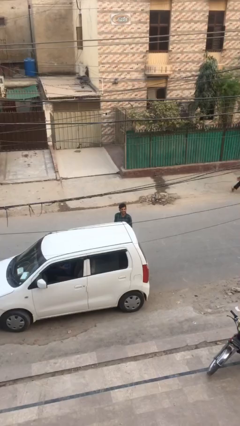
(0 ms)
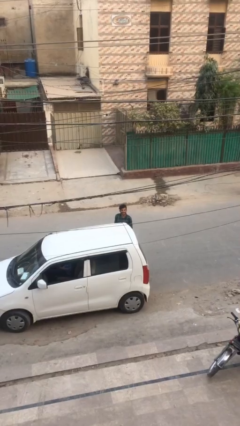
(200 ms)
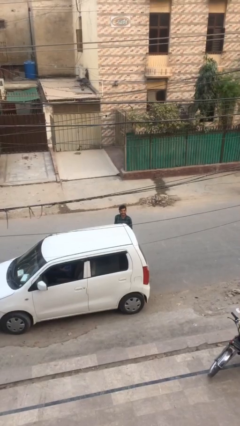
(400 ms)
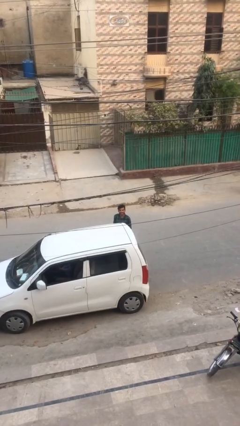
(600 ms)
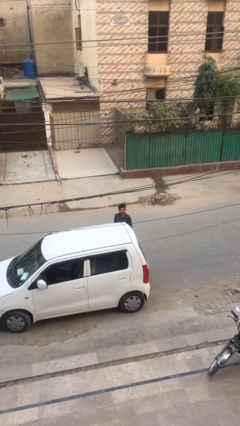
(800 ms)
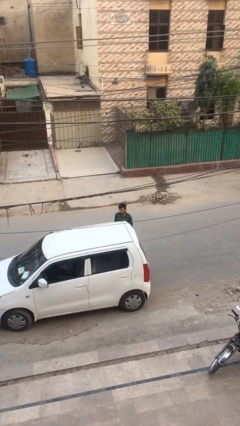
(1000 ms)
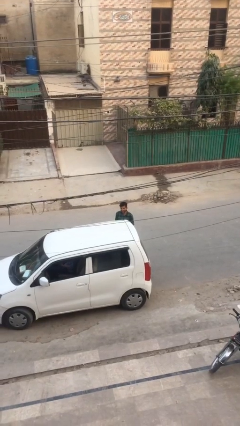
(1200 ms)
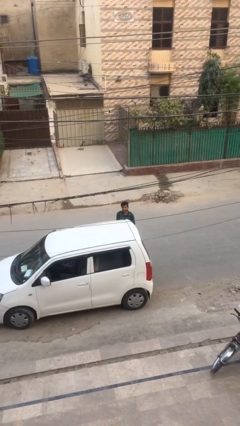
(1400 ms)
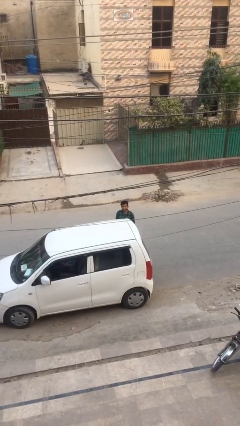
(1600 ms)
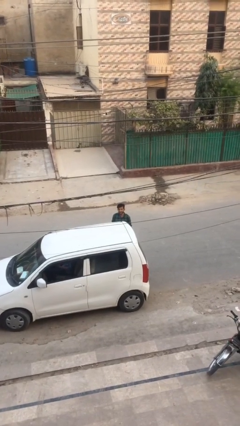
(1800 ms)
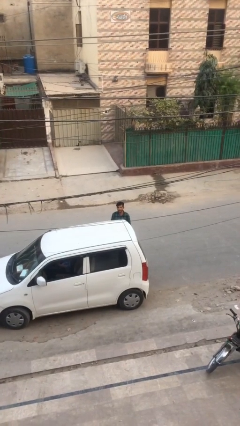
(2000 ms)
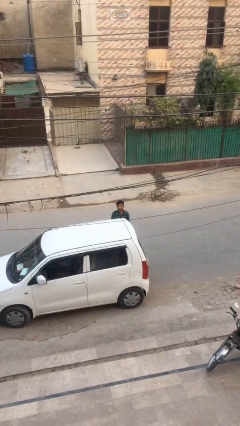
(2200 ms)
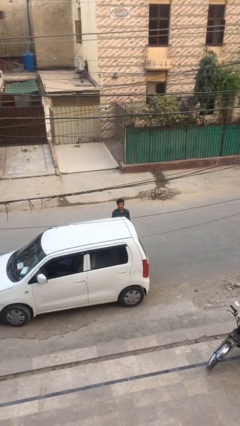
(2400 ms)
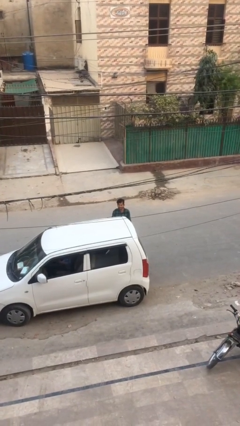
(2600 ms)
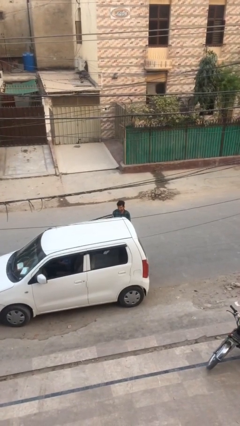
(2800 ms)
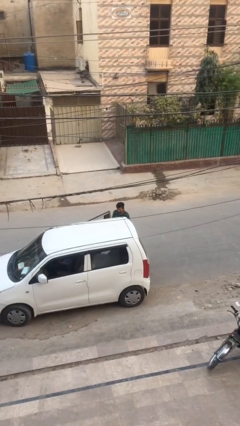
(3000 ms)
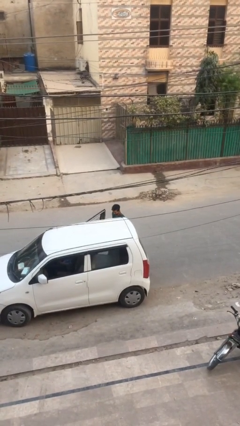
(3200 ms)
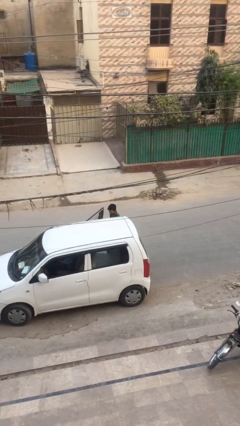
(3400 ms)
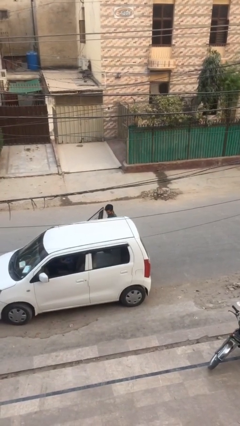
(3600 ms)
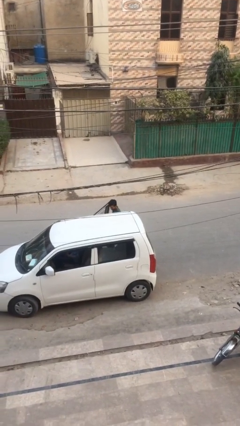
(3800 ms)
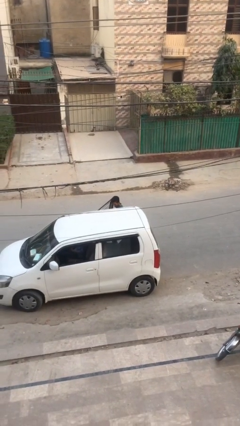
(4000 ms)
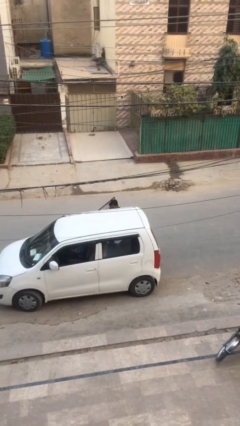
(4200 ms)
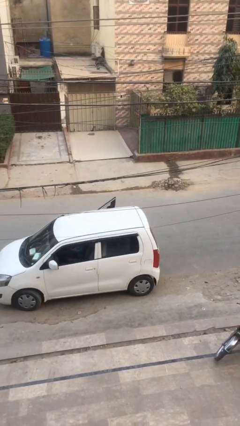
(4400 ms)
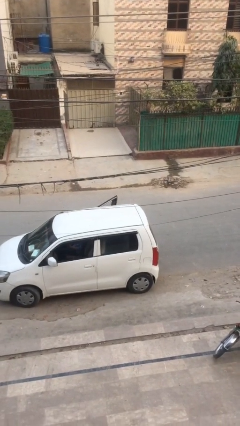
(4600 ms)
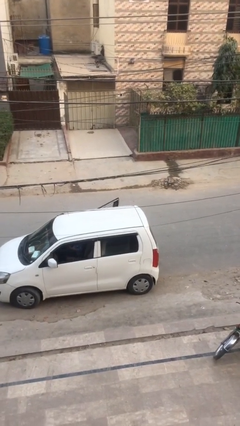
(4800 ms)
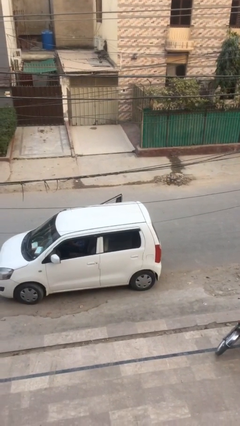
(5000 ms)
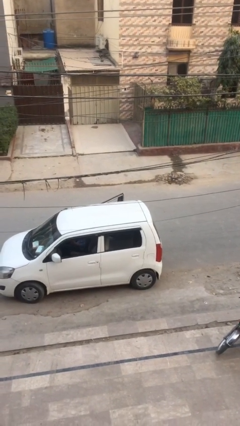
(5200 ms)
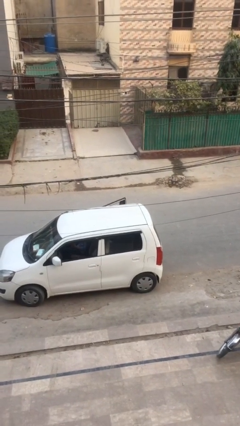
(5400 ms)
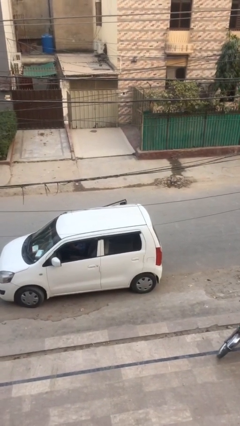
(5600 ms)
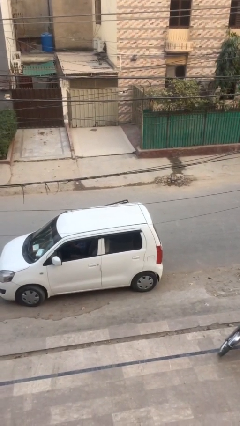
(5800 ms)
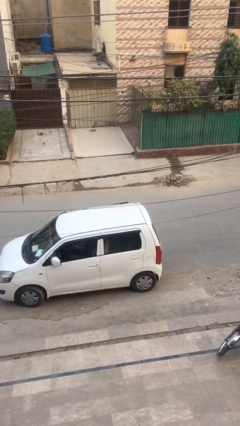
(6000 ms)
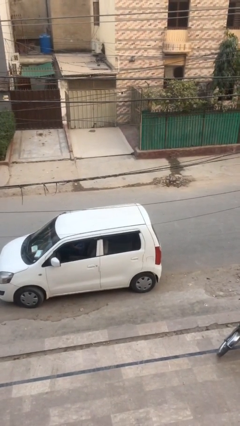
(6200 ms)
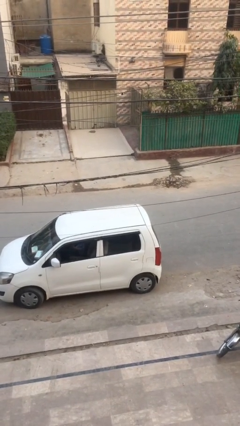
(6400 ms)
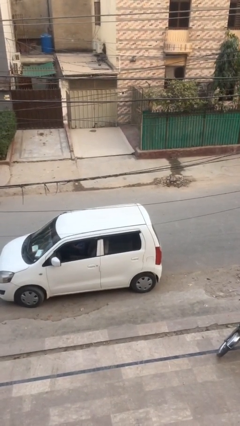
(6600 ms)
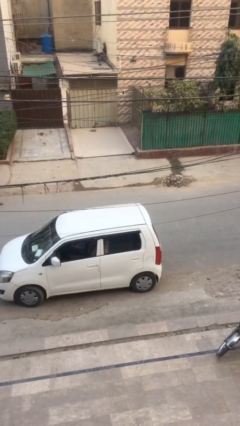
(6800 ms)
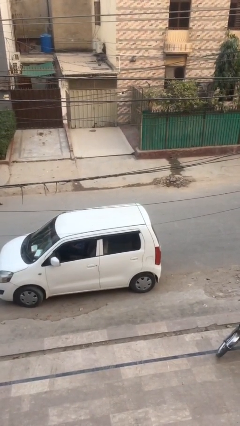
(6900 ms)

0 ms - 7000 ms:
car picks up person

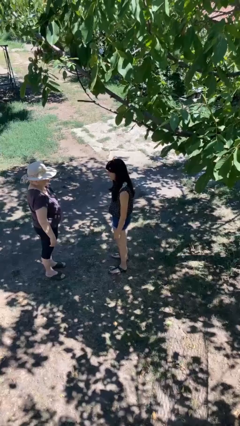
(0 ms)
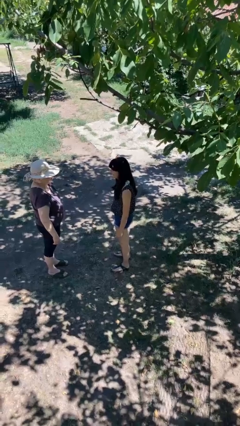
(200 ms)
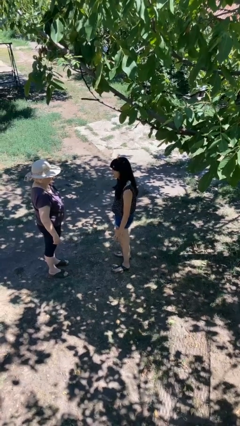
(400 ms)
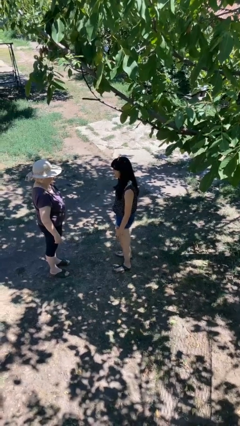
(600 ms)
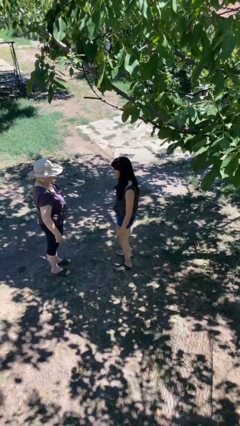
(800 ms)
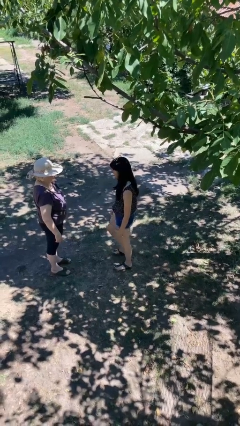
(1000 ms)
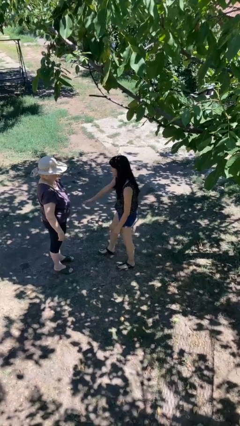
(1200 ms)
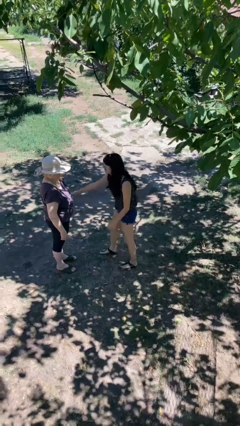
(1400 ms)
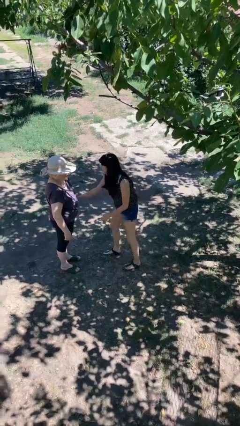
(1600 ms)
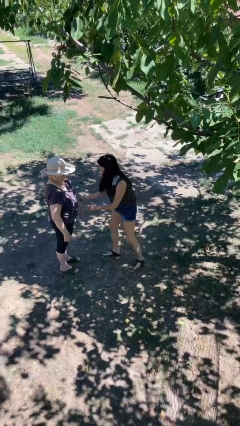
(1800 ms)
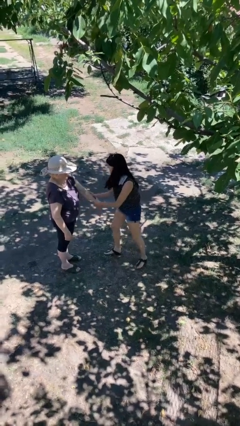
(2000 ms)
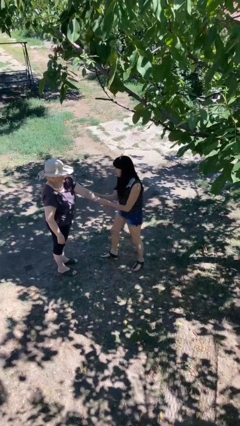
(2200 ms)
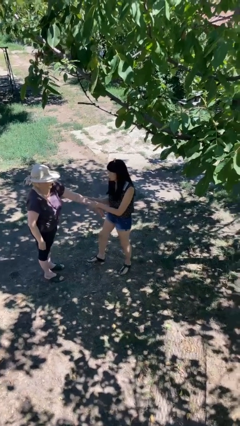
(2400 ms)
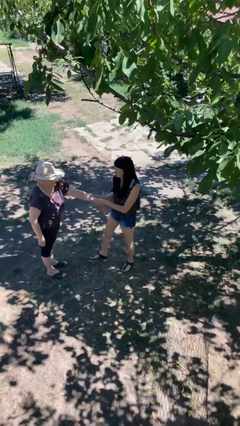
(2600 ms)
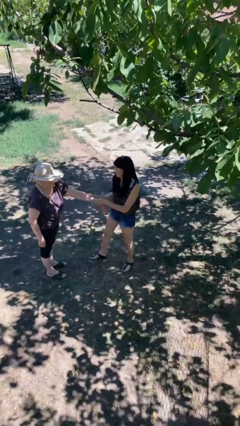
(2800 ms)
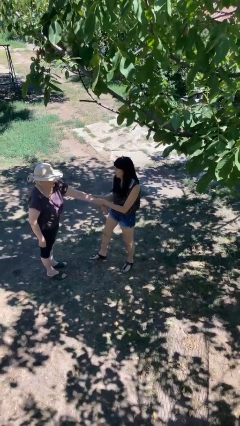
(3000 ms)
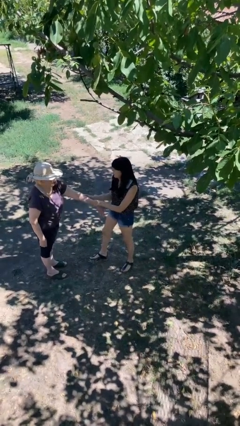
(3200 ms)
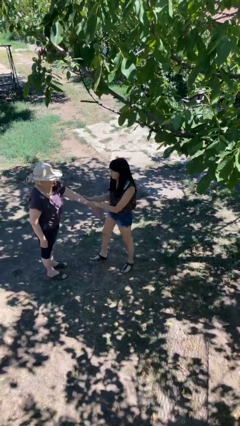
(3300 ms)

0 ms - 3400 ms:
person grabs person by forearm

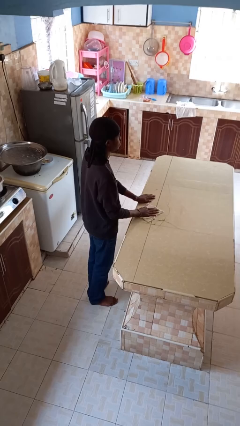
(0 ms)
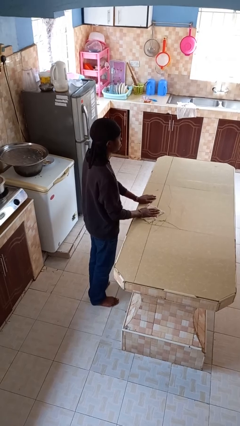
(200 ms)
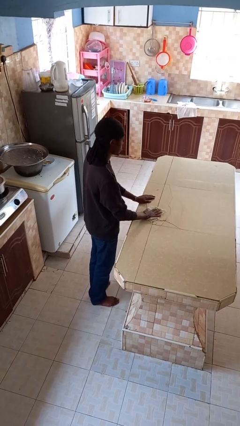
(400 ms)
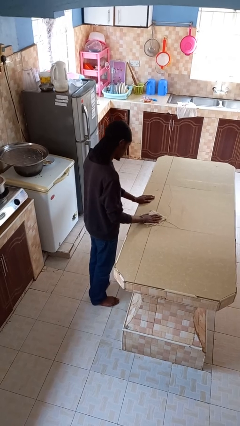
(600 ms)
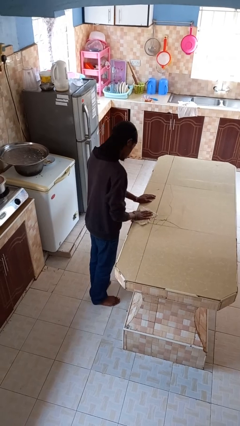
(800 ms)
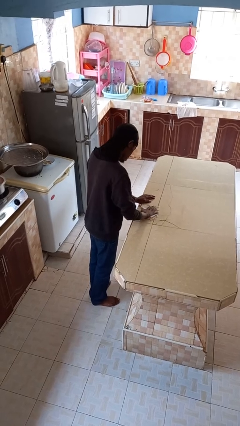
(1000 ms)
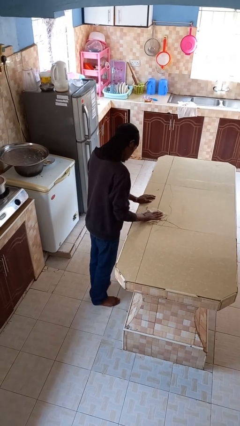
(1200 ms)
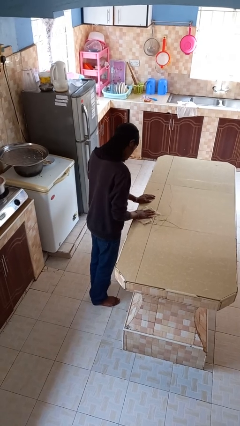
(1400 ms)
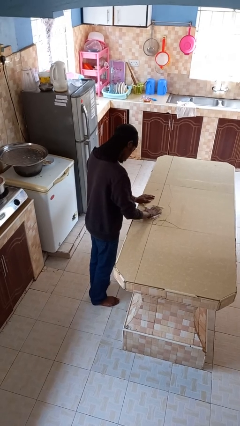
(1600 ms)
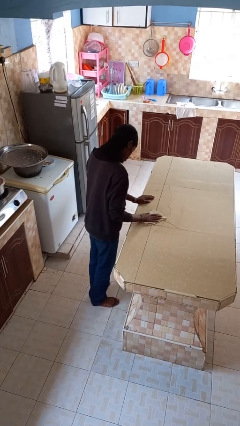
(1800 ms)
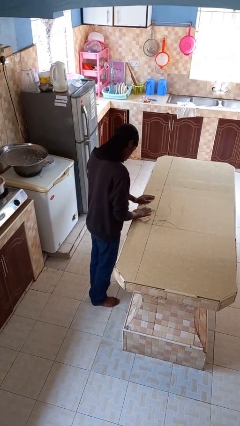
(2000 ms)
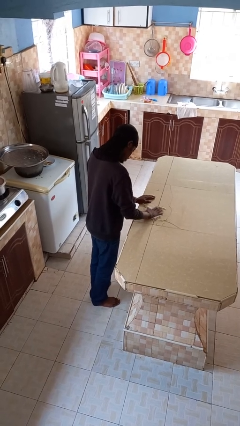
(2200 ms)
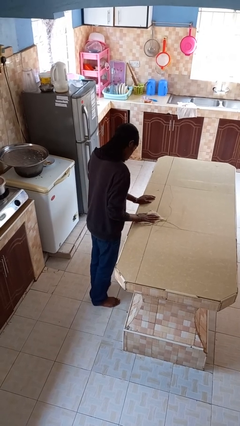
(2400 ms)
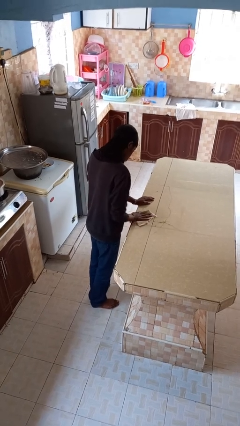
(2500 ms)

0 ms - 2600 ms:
person cleans table with rag

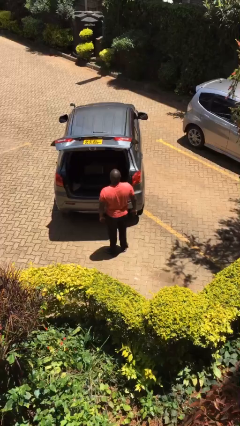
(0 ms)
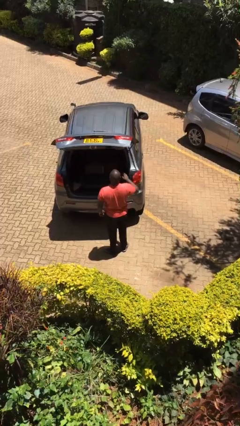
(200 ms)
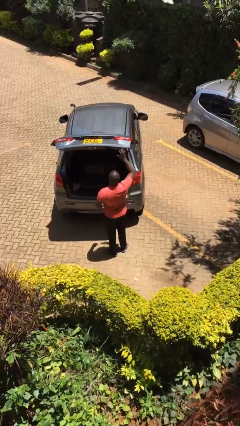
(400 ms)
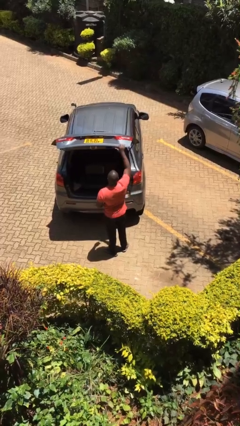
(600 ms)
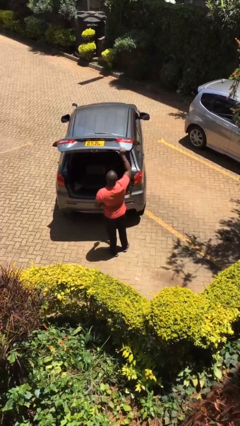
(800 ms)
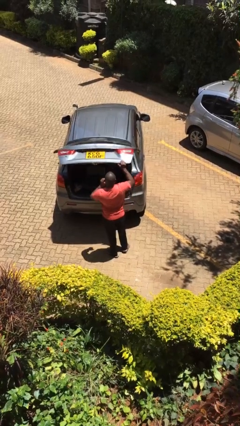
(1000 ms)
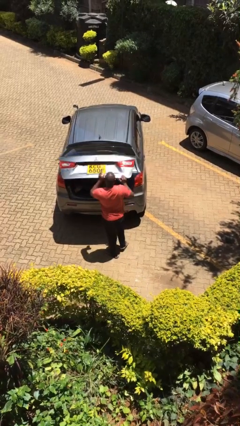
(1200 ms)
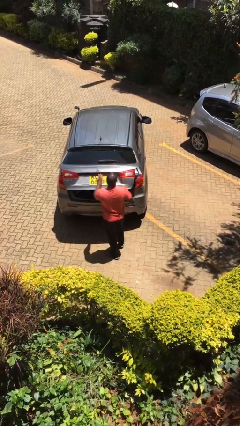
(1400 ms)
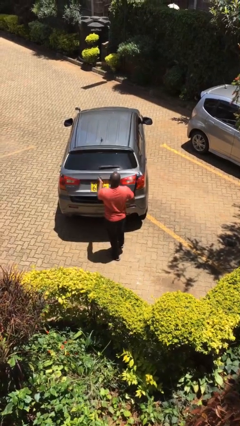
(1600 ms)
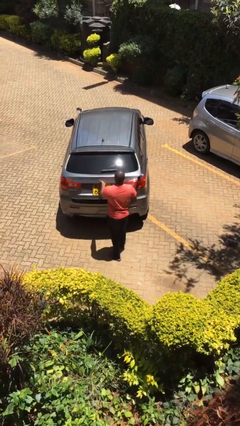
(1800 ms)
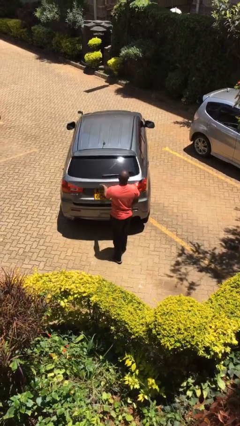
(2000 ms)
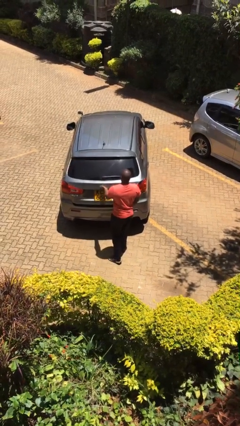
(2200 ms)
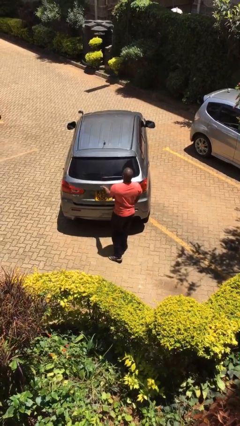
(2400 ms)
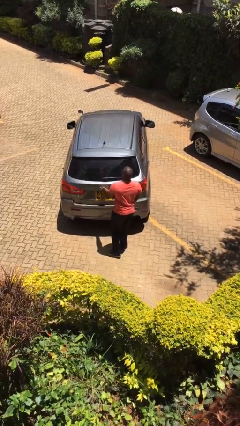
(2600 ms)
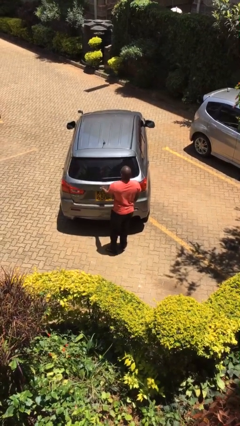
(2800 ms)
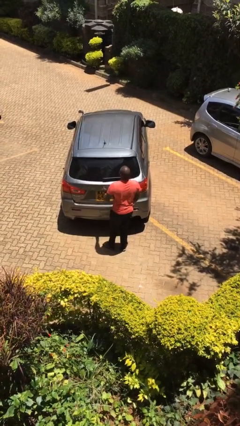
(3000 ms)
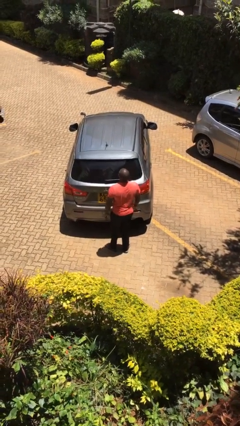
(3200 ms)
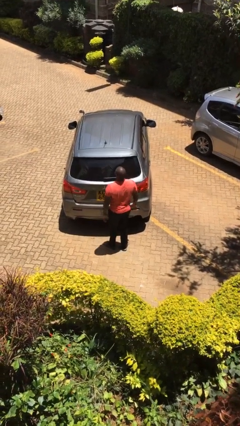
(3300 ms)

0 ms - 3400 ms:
person closes car trunk

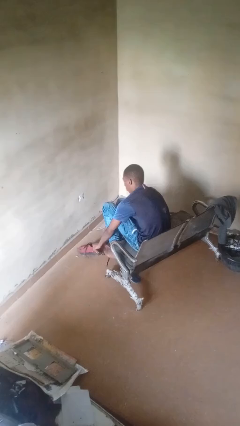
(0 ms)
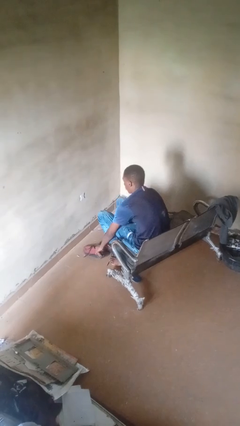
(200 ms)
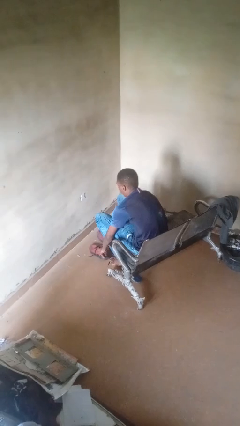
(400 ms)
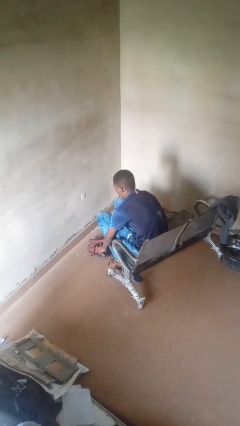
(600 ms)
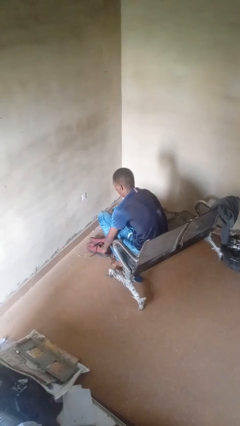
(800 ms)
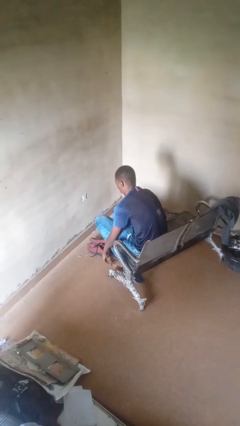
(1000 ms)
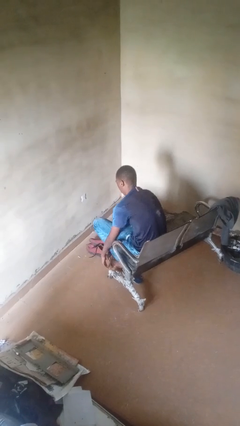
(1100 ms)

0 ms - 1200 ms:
person takes off shoes
